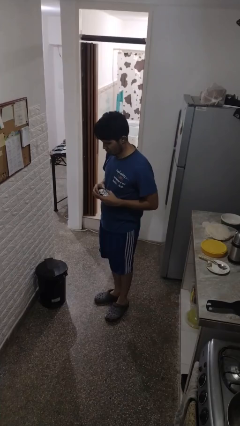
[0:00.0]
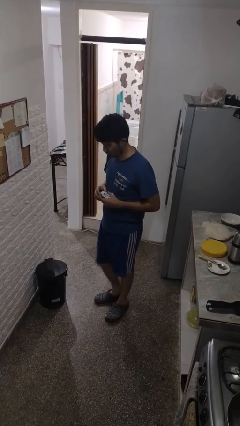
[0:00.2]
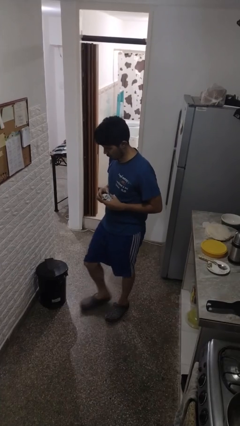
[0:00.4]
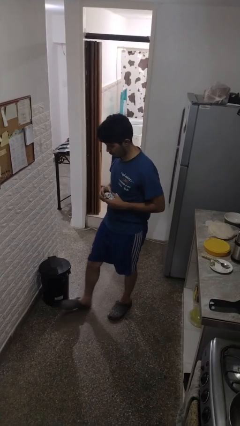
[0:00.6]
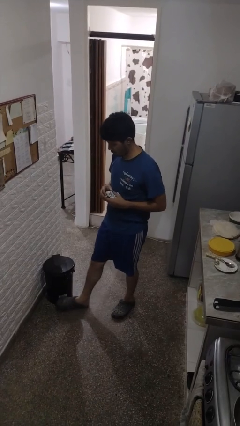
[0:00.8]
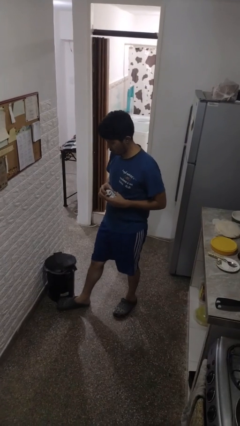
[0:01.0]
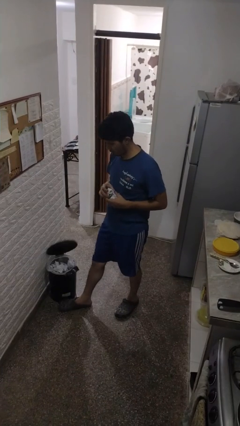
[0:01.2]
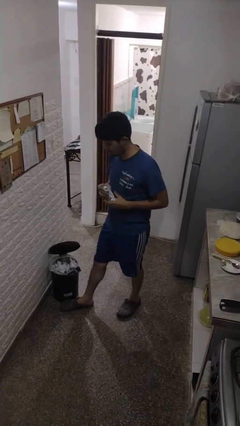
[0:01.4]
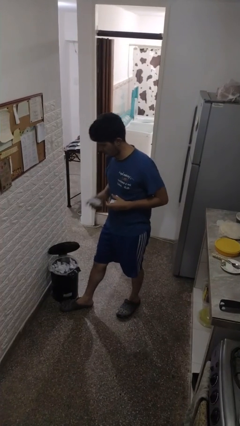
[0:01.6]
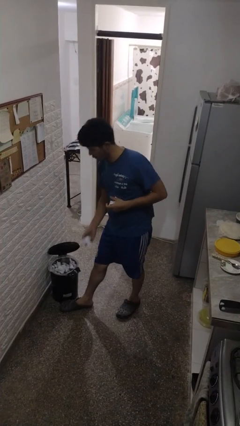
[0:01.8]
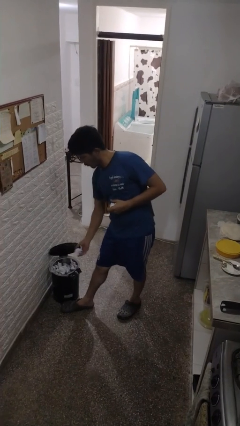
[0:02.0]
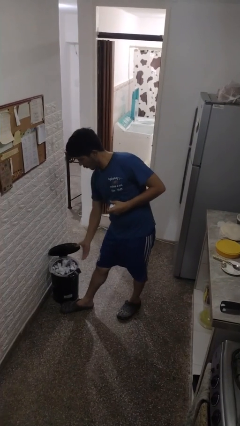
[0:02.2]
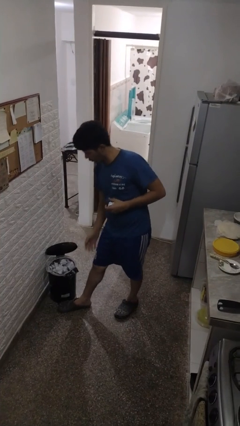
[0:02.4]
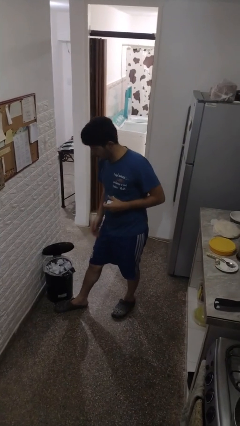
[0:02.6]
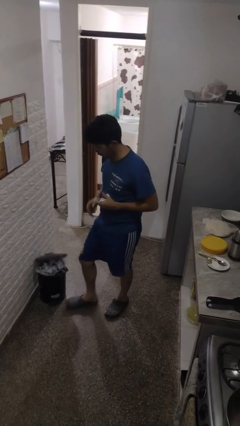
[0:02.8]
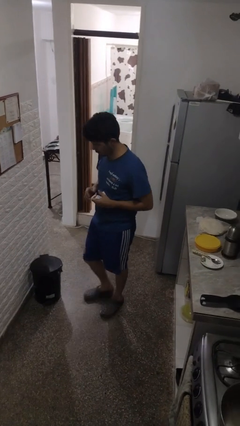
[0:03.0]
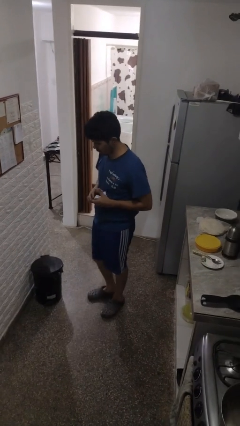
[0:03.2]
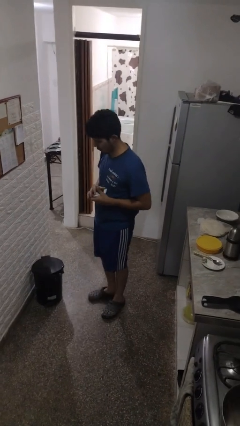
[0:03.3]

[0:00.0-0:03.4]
person discards trash

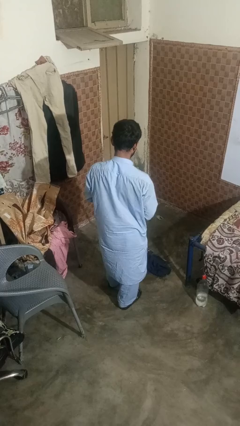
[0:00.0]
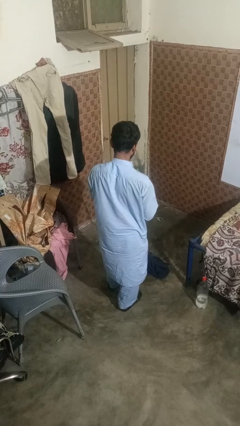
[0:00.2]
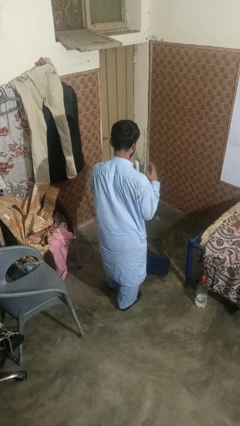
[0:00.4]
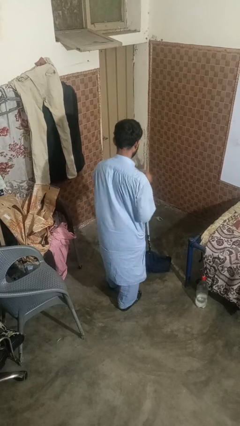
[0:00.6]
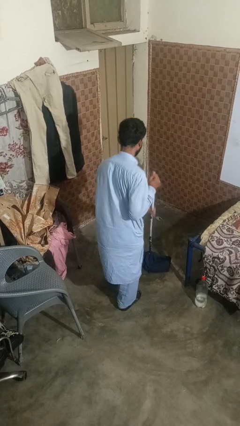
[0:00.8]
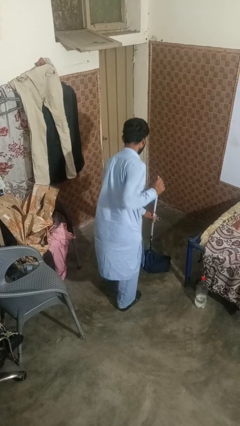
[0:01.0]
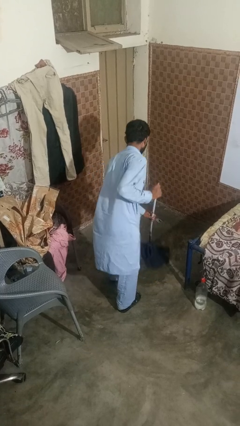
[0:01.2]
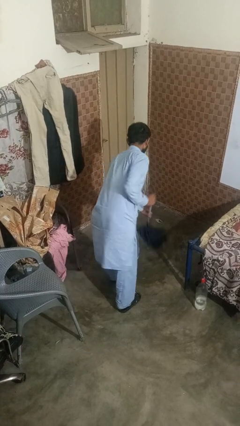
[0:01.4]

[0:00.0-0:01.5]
person mops

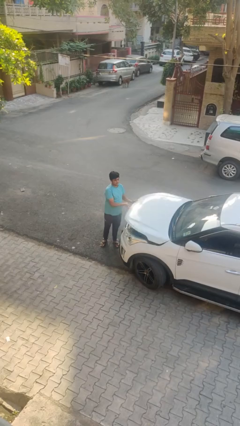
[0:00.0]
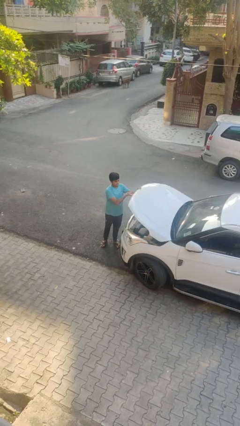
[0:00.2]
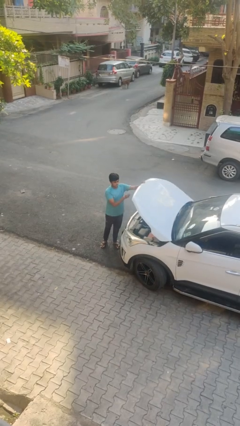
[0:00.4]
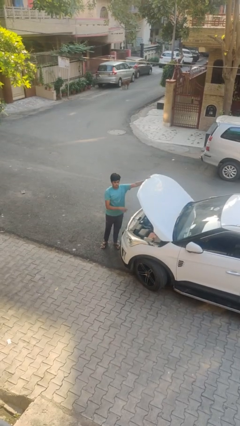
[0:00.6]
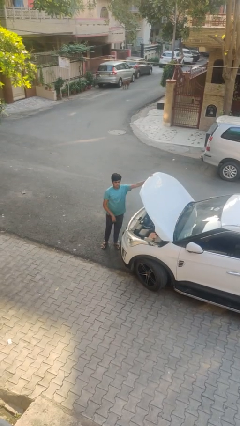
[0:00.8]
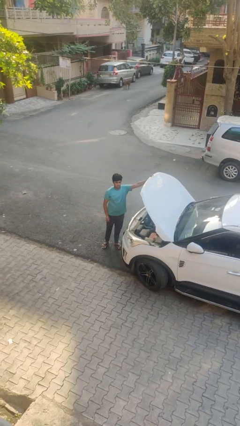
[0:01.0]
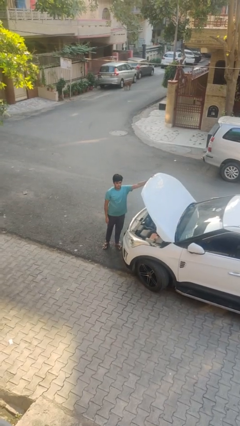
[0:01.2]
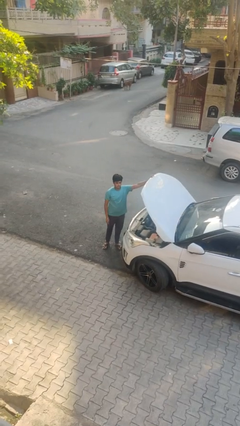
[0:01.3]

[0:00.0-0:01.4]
person opens car hood

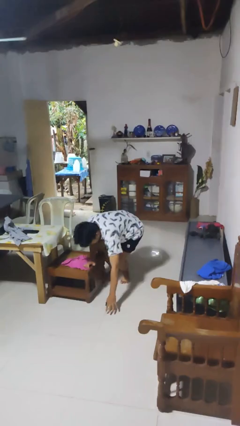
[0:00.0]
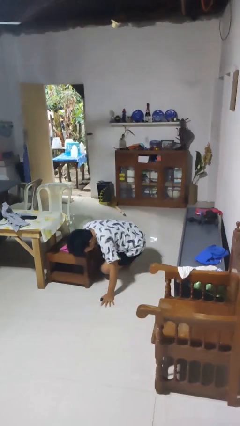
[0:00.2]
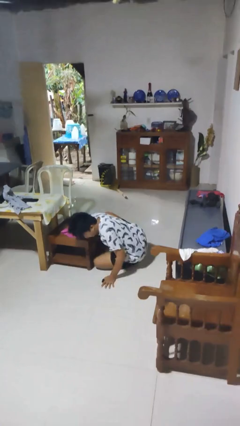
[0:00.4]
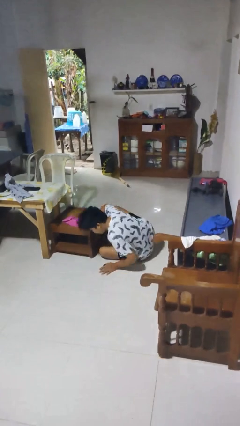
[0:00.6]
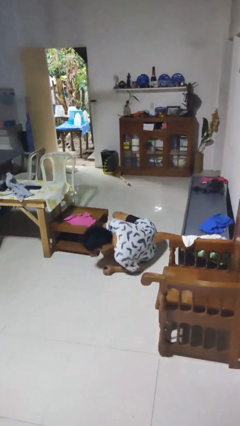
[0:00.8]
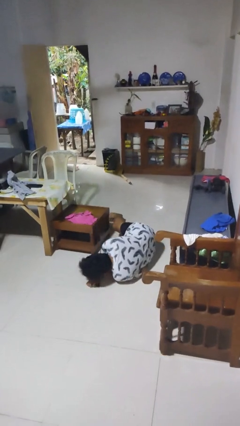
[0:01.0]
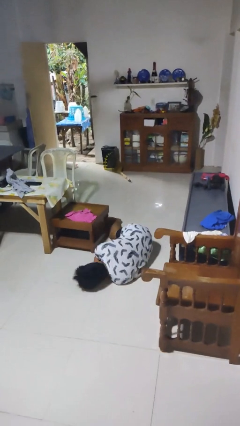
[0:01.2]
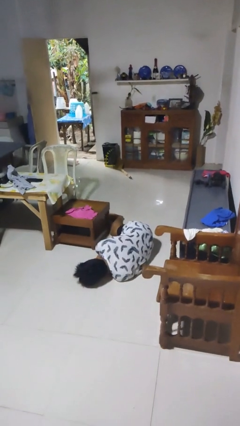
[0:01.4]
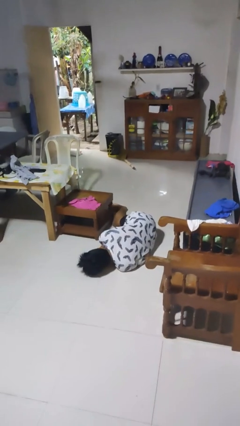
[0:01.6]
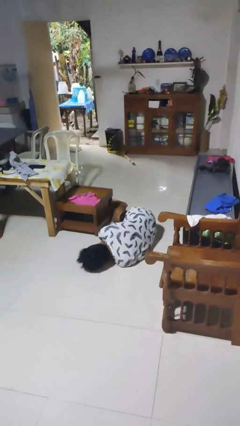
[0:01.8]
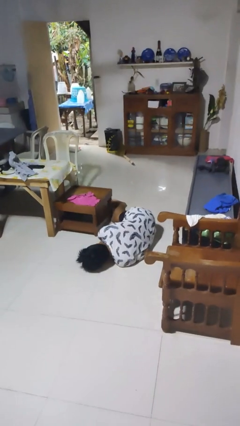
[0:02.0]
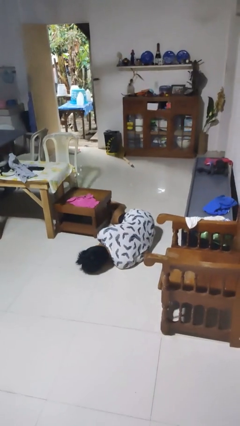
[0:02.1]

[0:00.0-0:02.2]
person lies down on floor

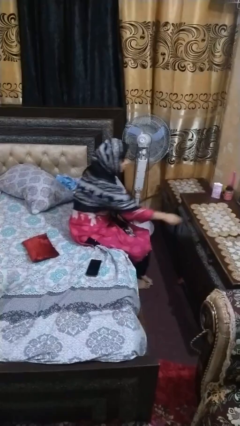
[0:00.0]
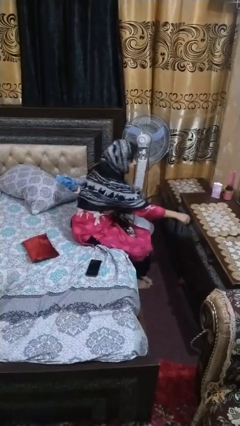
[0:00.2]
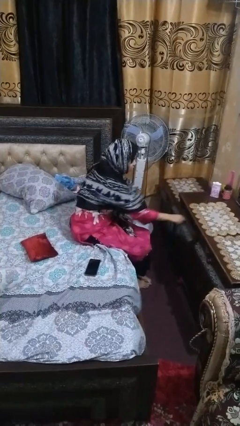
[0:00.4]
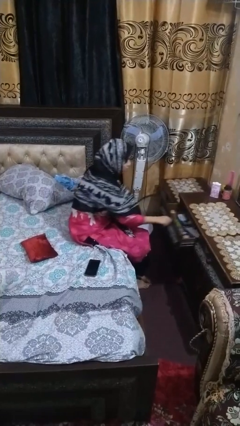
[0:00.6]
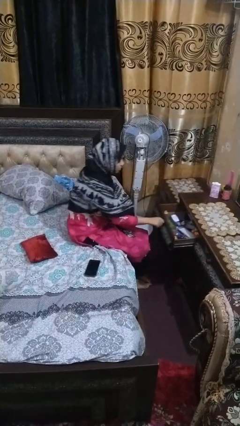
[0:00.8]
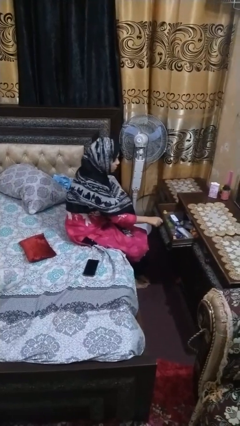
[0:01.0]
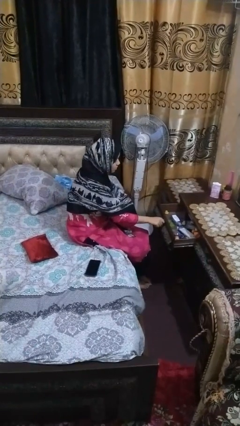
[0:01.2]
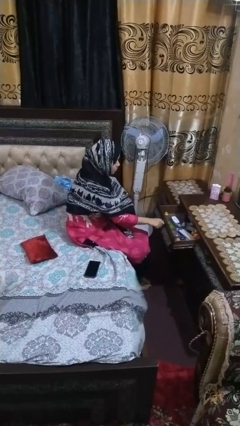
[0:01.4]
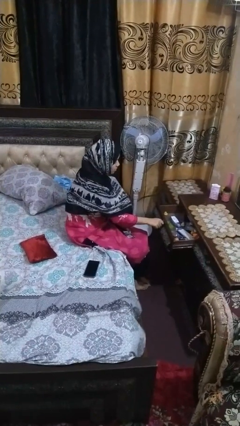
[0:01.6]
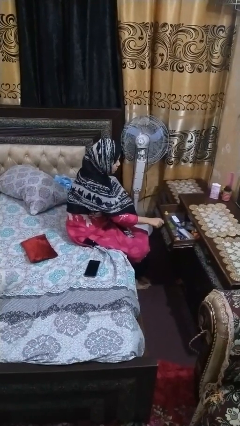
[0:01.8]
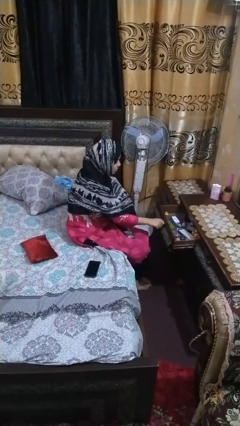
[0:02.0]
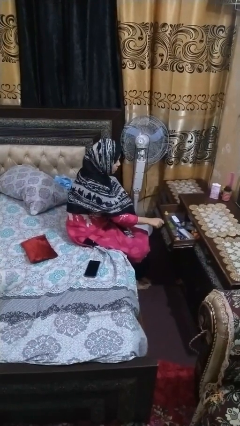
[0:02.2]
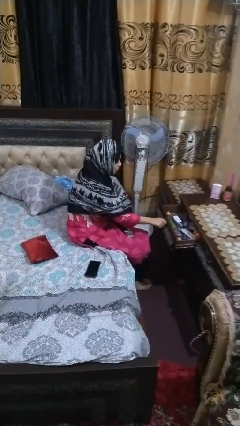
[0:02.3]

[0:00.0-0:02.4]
person opens dresser drawer

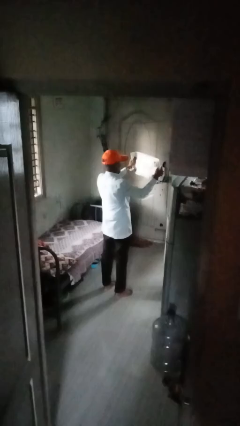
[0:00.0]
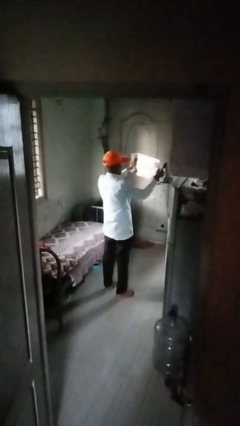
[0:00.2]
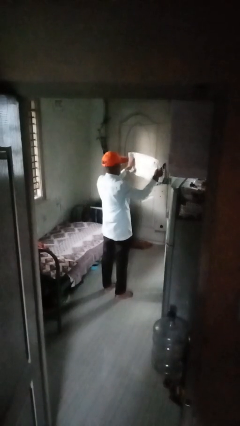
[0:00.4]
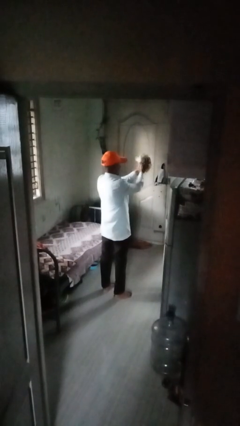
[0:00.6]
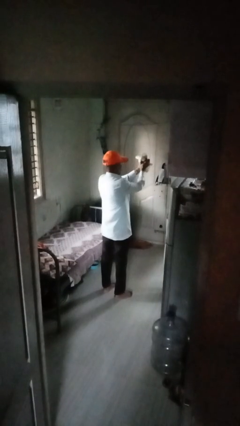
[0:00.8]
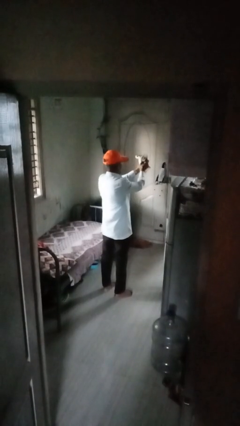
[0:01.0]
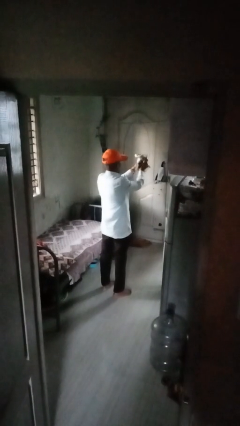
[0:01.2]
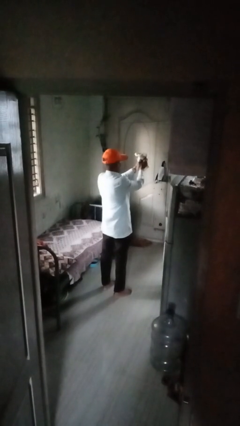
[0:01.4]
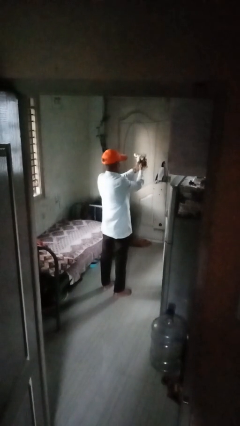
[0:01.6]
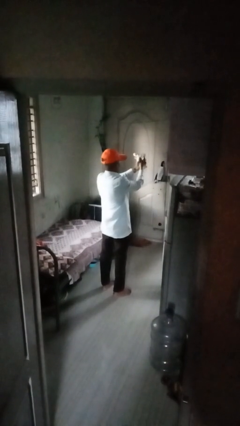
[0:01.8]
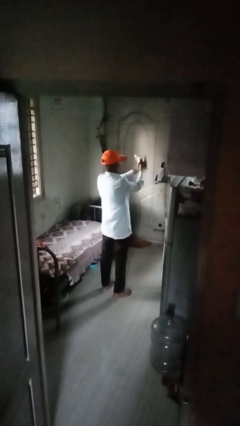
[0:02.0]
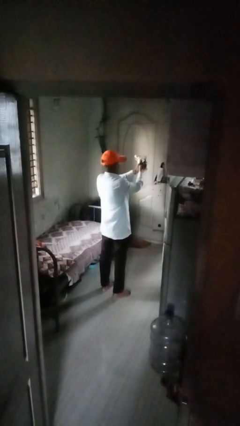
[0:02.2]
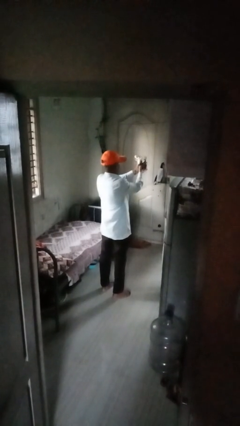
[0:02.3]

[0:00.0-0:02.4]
person crumples paper

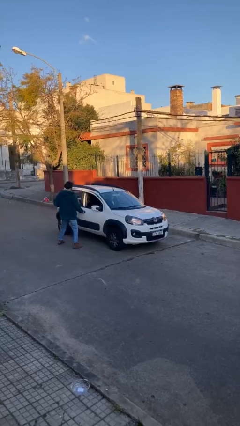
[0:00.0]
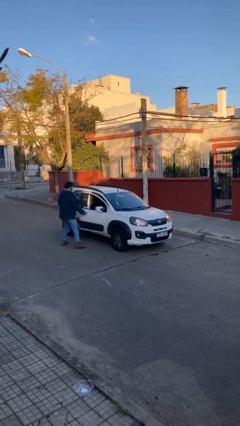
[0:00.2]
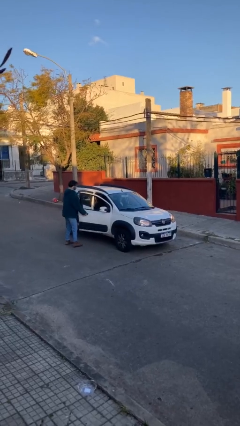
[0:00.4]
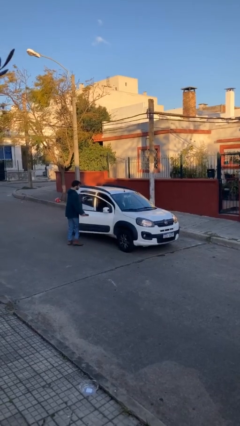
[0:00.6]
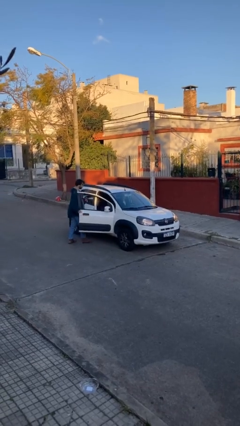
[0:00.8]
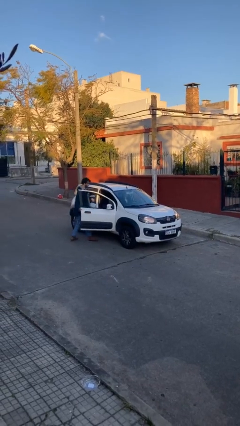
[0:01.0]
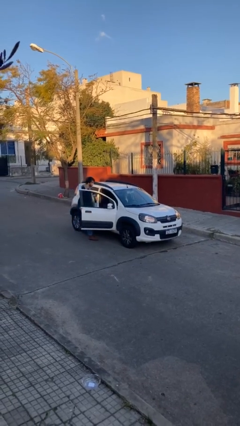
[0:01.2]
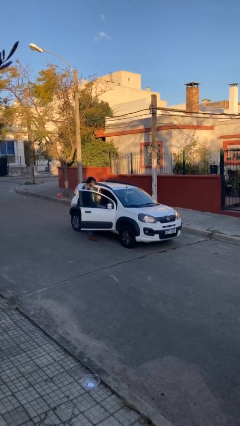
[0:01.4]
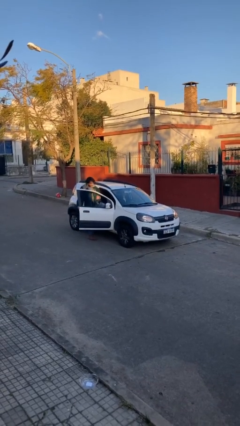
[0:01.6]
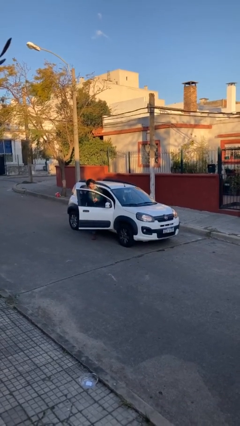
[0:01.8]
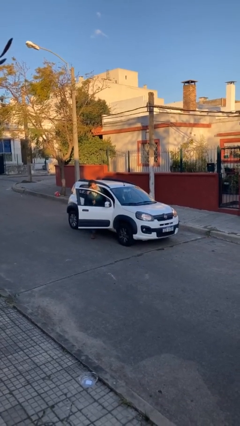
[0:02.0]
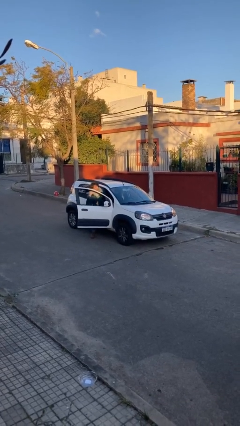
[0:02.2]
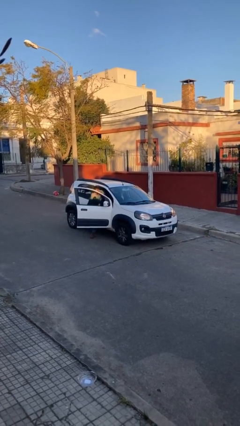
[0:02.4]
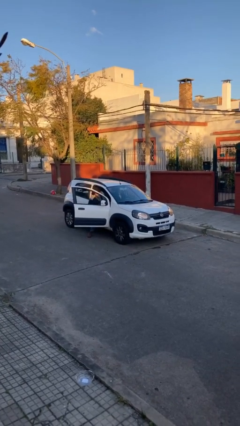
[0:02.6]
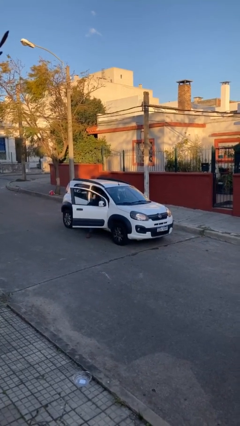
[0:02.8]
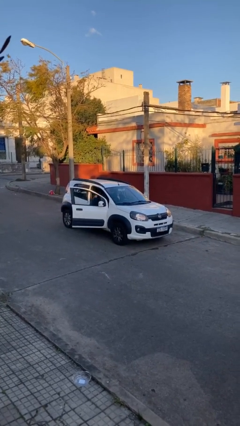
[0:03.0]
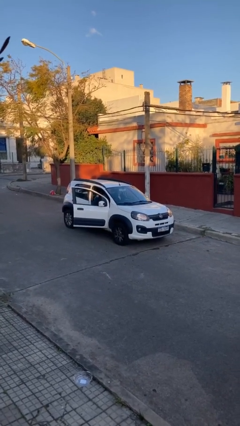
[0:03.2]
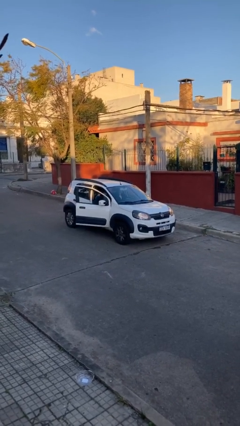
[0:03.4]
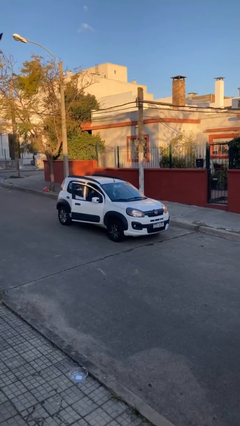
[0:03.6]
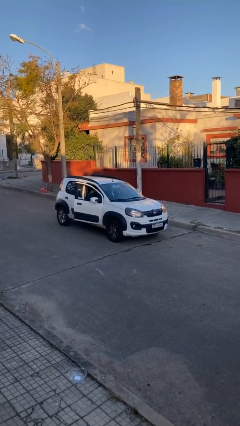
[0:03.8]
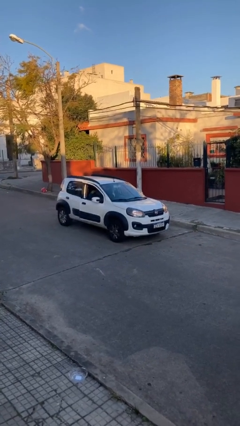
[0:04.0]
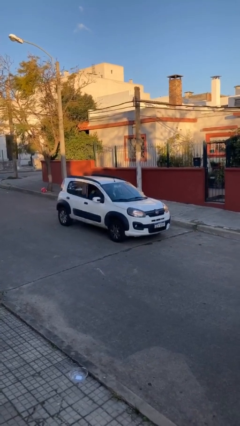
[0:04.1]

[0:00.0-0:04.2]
car picks up person
